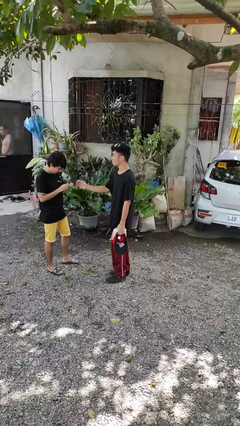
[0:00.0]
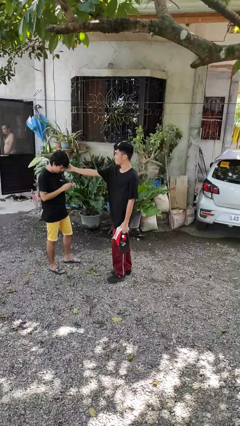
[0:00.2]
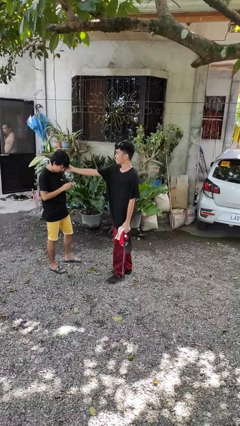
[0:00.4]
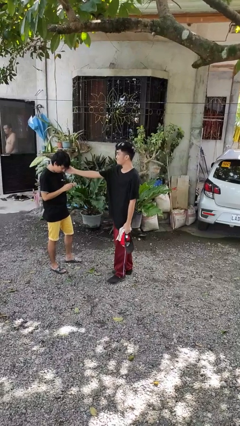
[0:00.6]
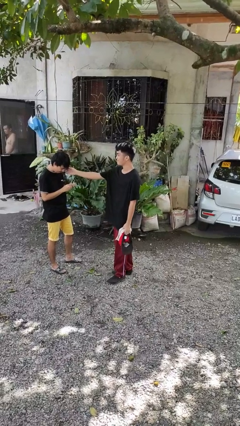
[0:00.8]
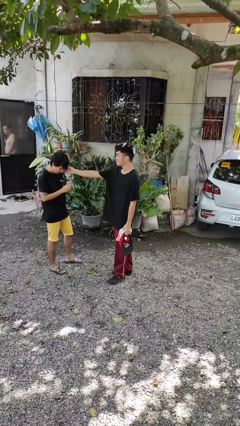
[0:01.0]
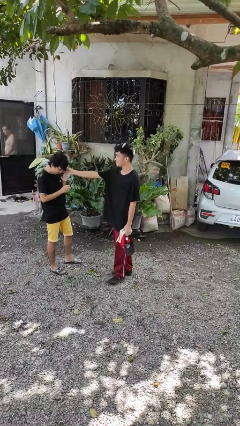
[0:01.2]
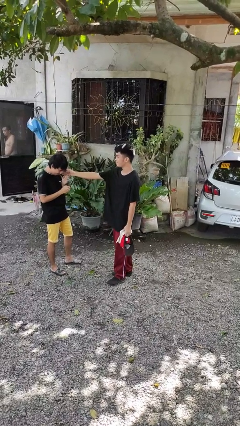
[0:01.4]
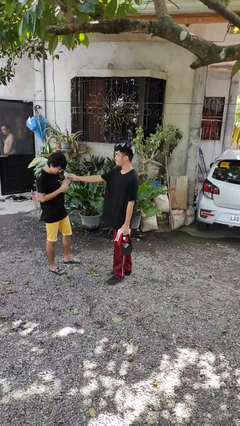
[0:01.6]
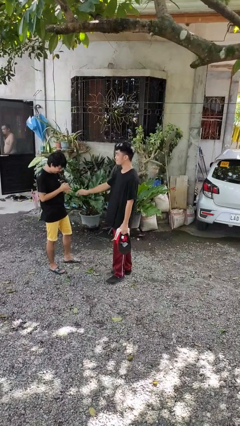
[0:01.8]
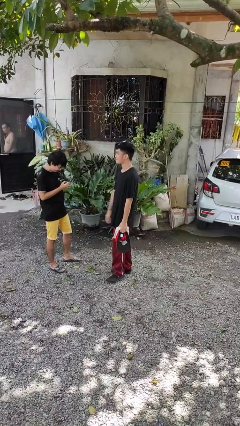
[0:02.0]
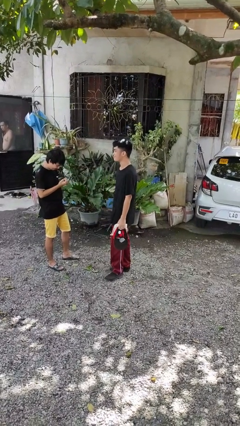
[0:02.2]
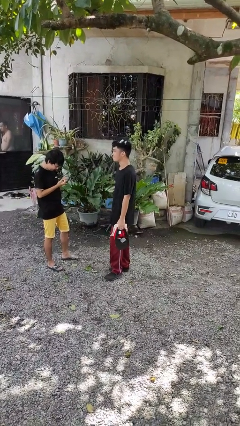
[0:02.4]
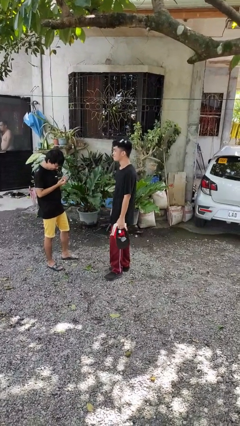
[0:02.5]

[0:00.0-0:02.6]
person touches face of person

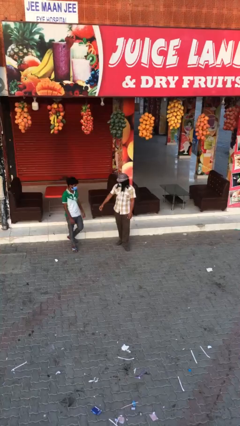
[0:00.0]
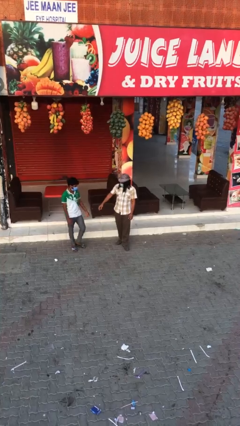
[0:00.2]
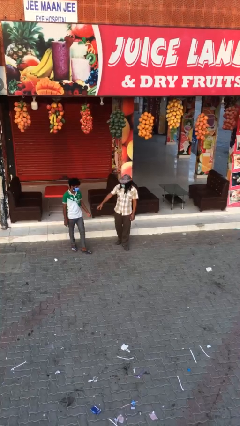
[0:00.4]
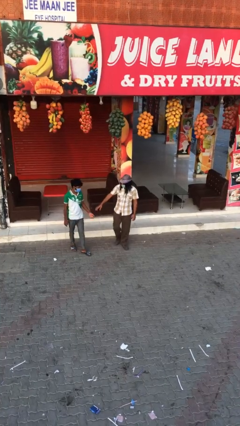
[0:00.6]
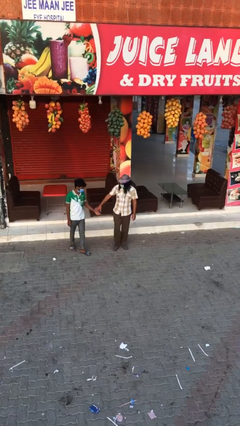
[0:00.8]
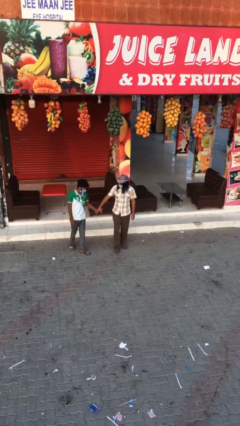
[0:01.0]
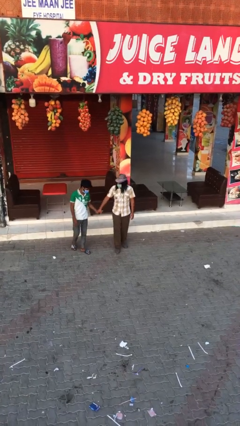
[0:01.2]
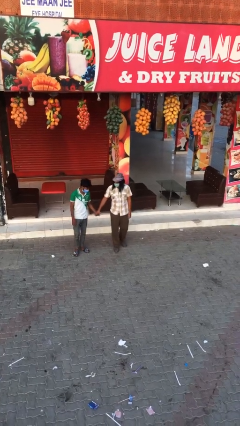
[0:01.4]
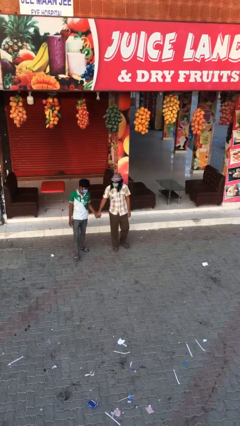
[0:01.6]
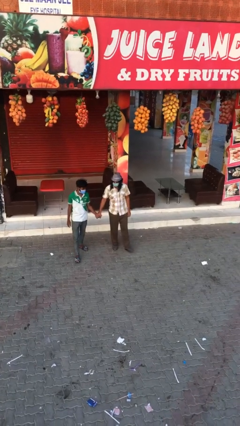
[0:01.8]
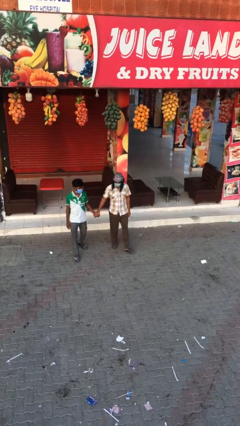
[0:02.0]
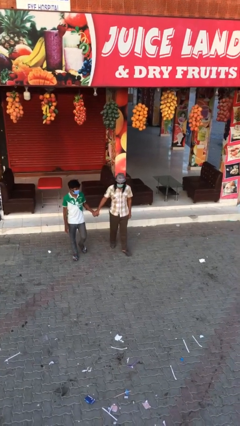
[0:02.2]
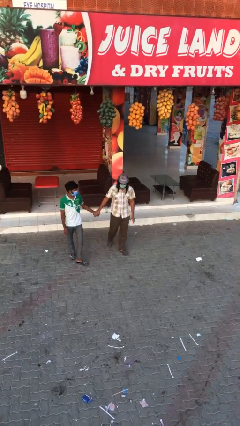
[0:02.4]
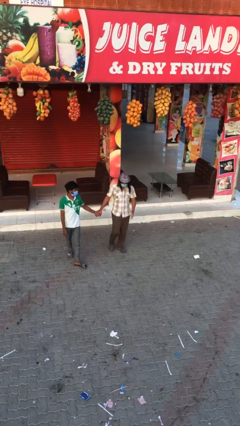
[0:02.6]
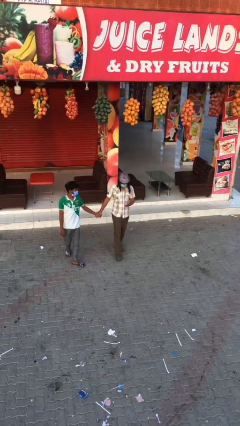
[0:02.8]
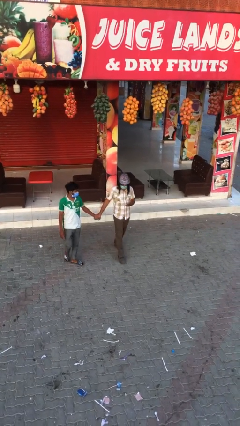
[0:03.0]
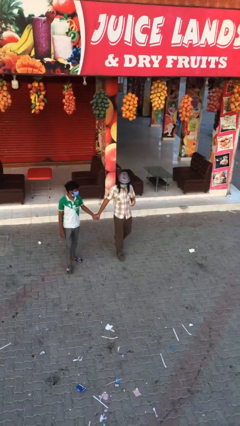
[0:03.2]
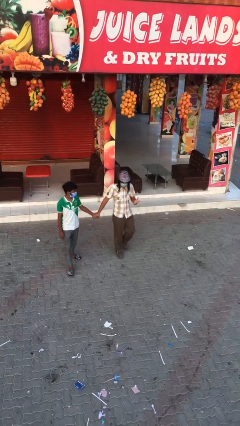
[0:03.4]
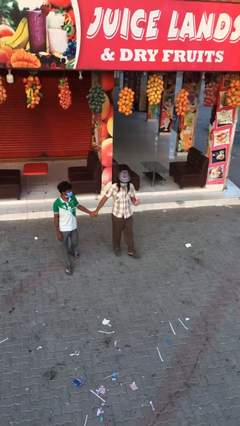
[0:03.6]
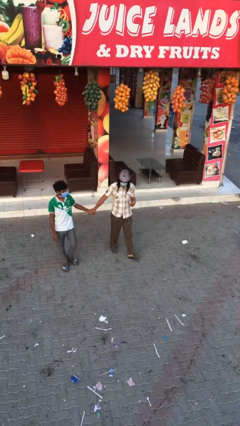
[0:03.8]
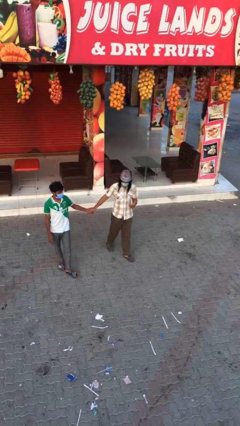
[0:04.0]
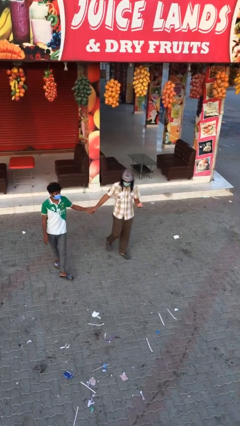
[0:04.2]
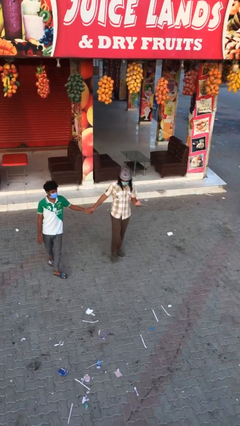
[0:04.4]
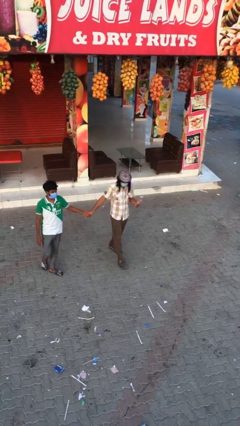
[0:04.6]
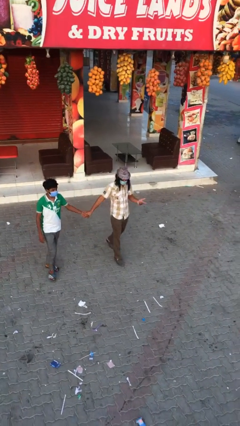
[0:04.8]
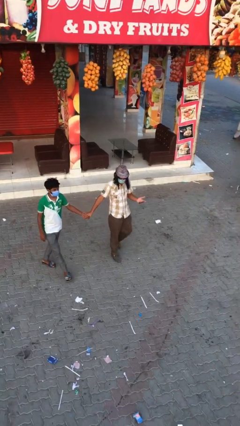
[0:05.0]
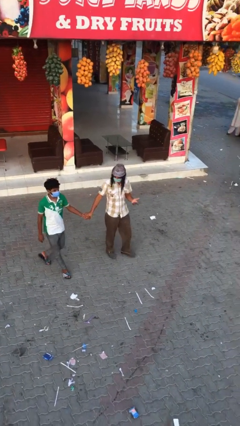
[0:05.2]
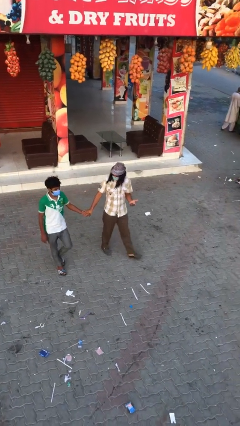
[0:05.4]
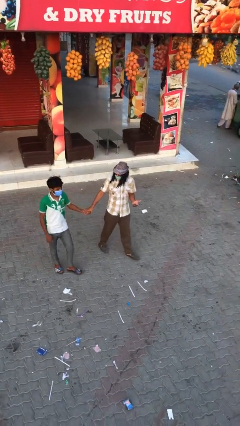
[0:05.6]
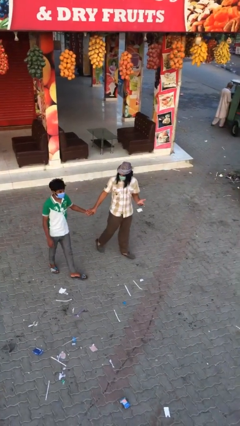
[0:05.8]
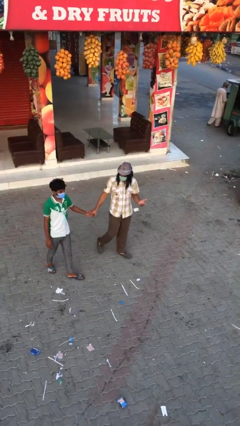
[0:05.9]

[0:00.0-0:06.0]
person holds hand

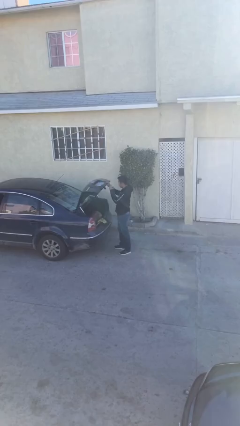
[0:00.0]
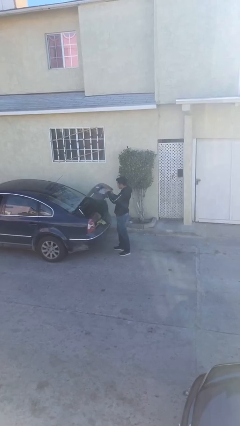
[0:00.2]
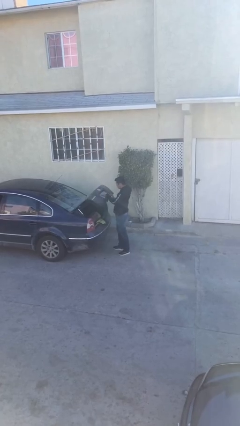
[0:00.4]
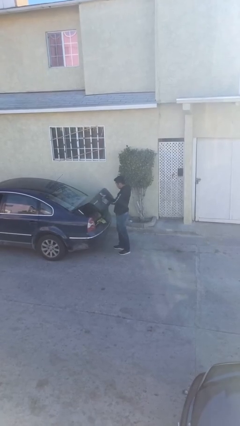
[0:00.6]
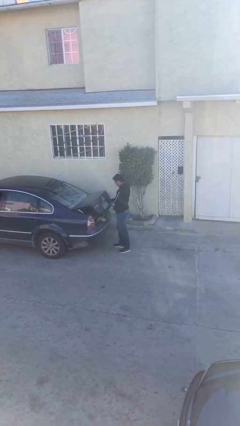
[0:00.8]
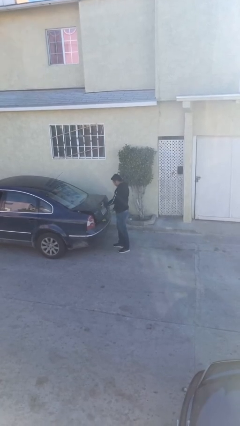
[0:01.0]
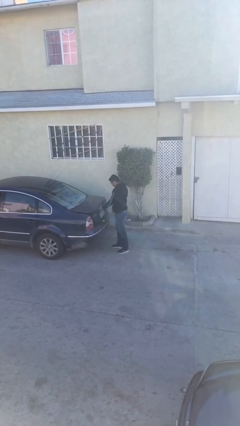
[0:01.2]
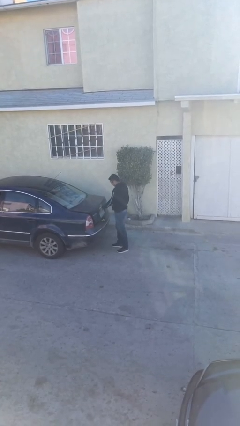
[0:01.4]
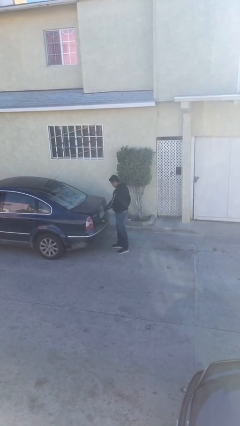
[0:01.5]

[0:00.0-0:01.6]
person closes car trunk

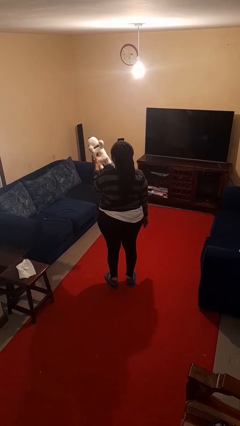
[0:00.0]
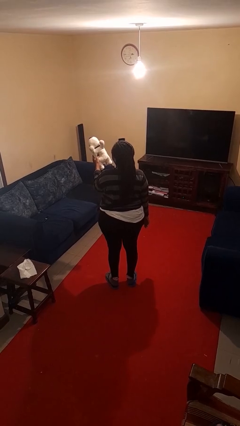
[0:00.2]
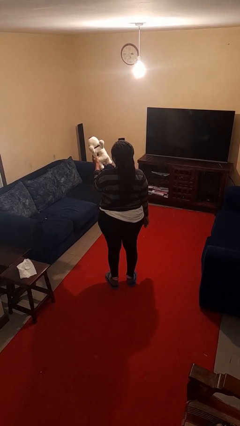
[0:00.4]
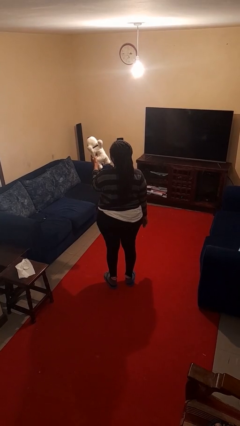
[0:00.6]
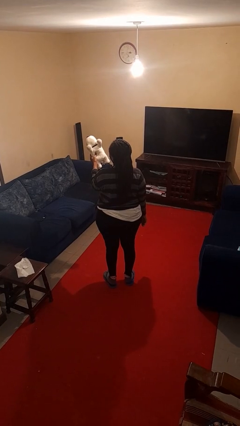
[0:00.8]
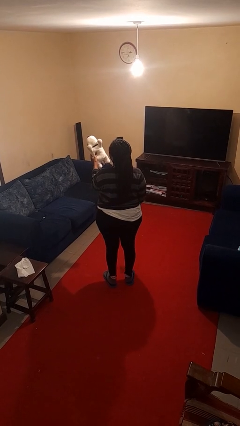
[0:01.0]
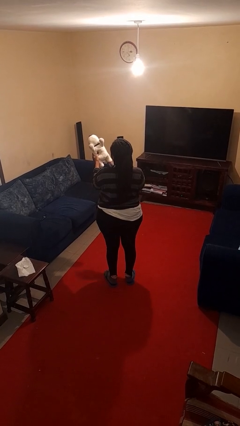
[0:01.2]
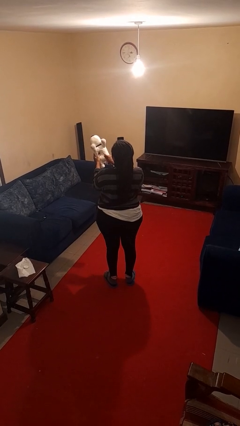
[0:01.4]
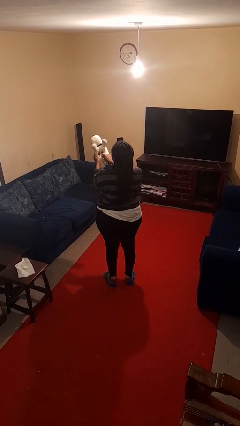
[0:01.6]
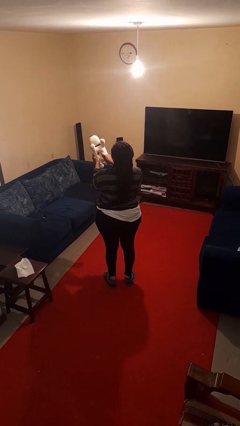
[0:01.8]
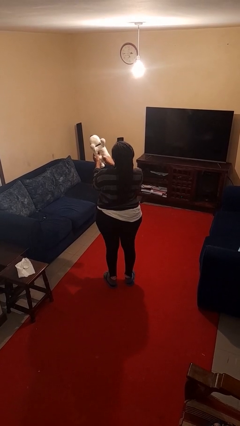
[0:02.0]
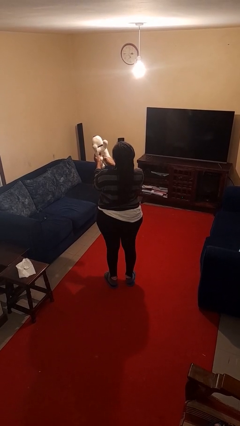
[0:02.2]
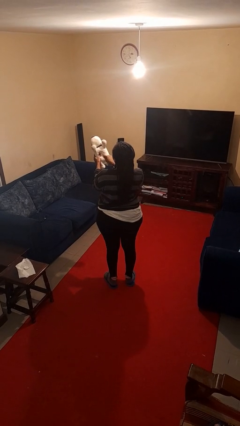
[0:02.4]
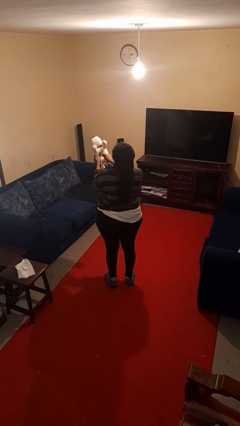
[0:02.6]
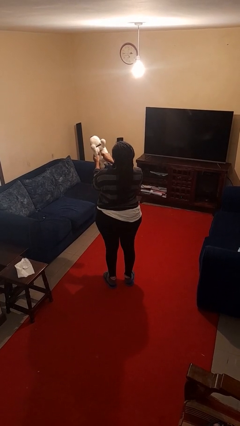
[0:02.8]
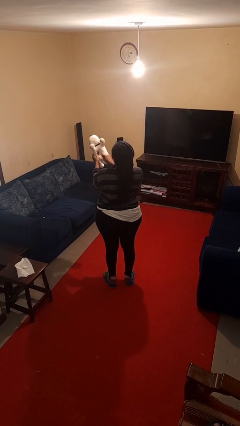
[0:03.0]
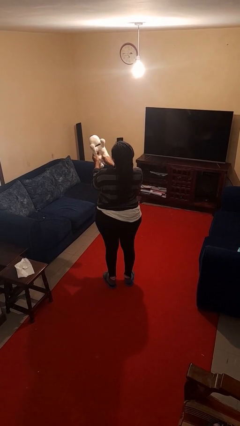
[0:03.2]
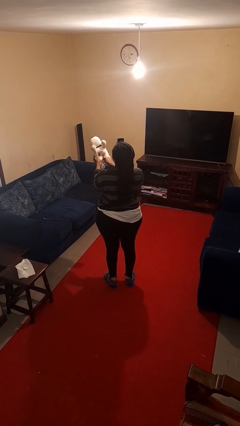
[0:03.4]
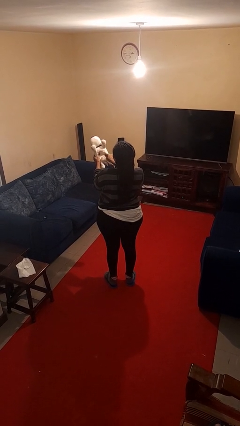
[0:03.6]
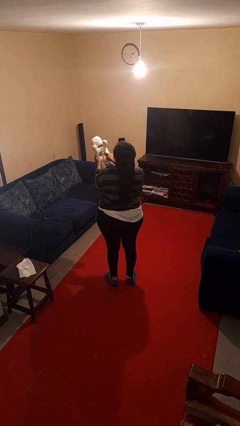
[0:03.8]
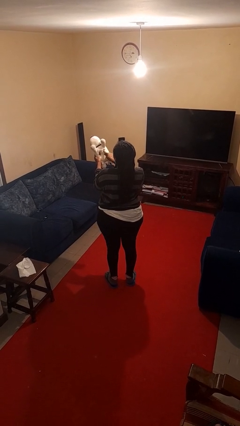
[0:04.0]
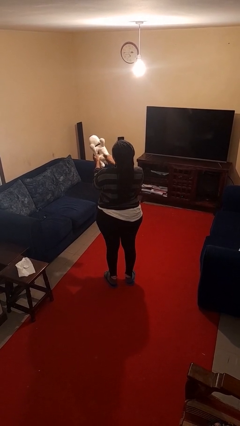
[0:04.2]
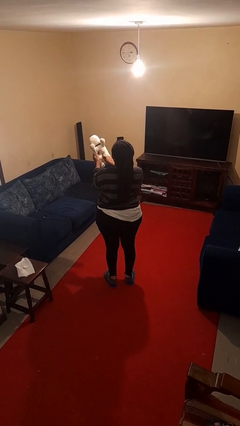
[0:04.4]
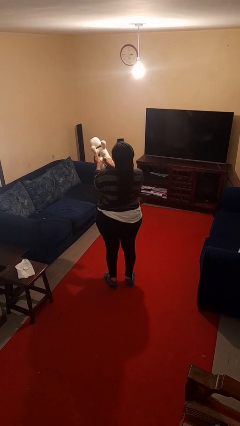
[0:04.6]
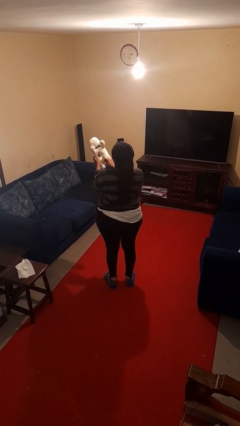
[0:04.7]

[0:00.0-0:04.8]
person taps object with finger

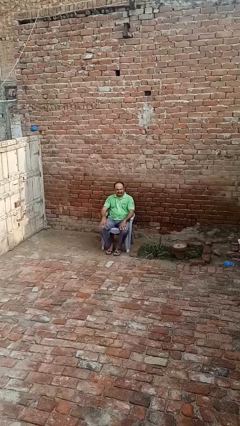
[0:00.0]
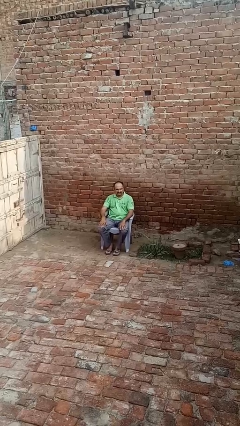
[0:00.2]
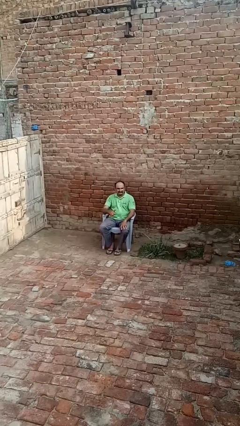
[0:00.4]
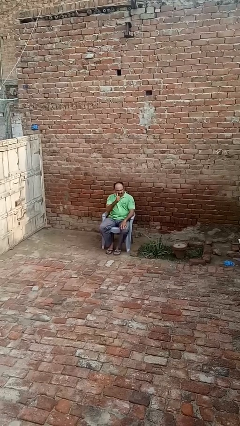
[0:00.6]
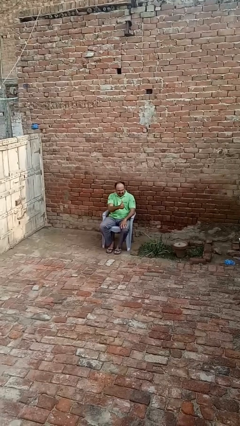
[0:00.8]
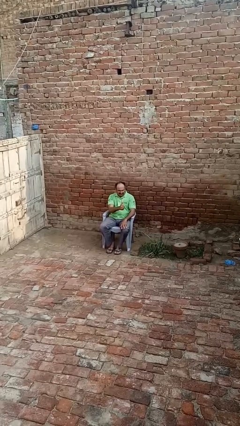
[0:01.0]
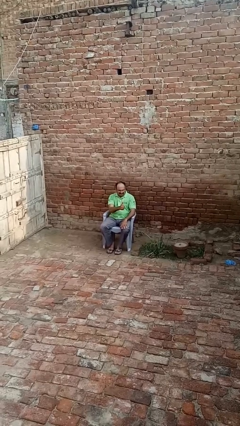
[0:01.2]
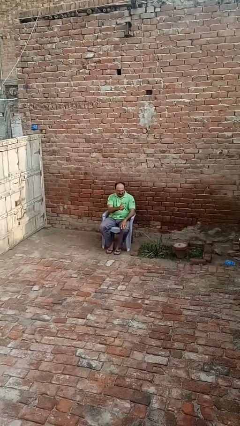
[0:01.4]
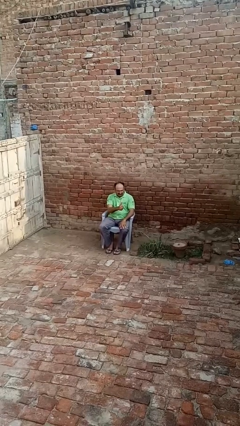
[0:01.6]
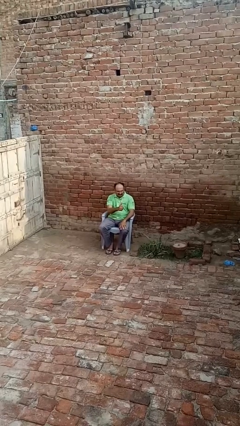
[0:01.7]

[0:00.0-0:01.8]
person gestures thumbs up

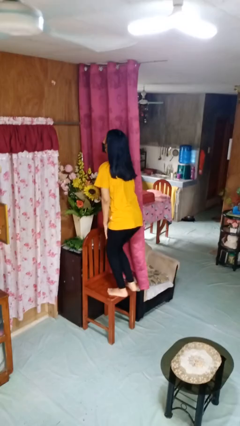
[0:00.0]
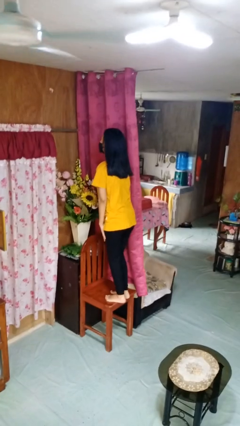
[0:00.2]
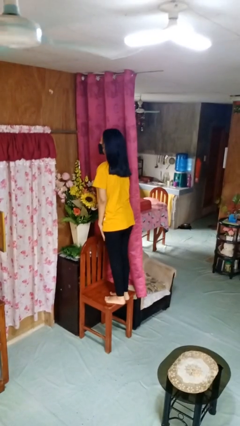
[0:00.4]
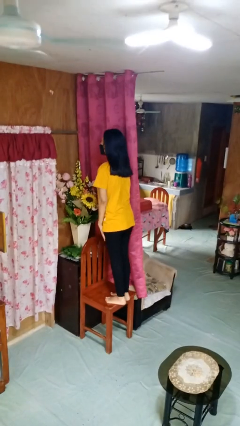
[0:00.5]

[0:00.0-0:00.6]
person climbs on chair

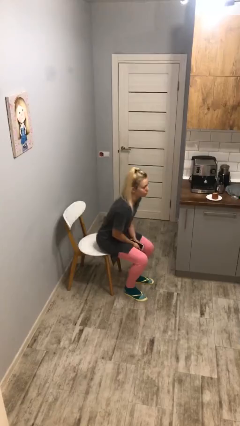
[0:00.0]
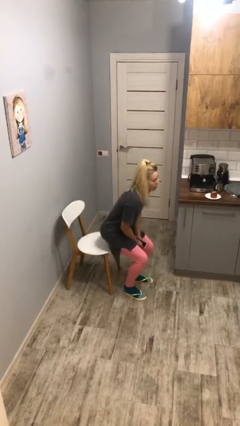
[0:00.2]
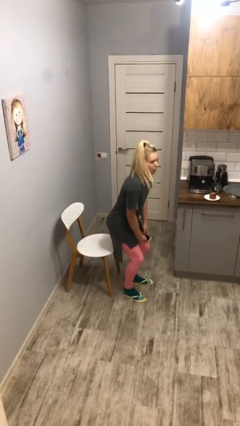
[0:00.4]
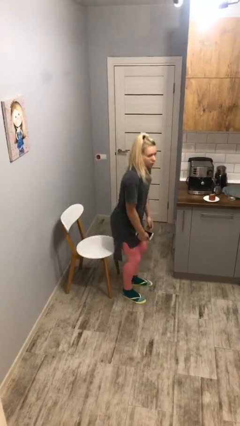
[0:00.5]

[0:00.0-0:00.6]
person stands up
